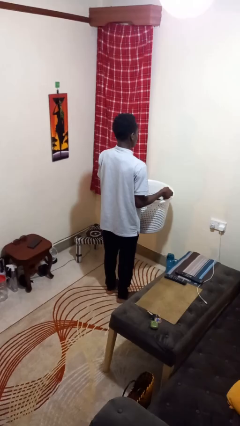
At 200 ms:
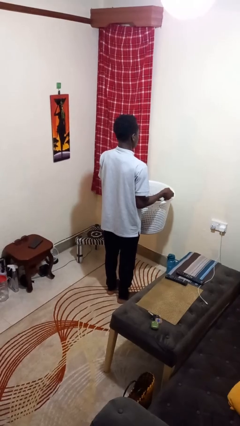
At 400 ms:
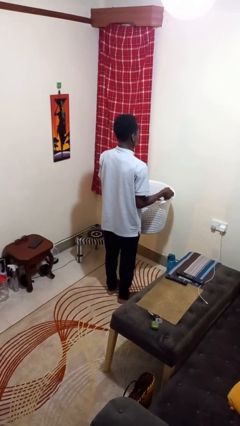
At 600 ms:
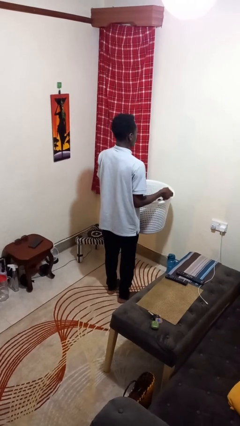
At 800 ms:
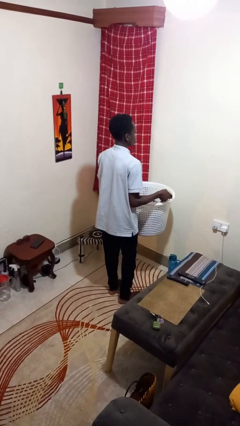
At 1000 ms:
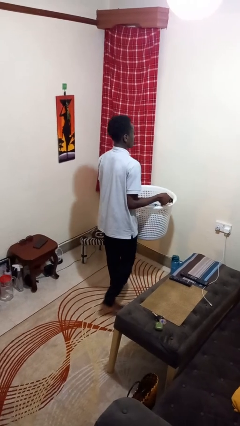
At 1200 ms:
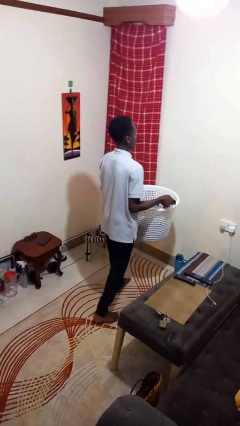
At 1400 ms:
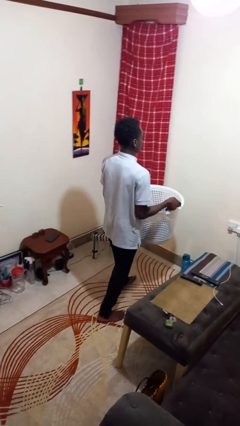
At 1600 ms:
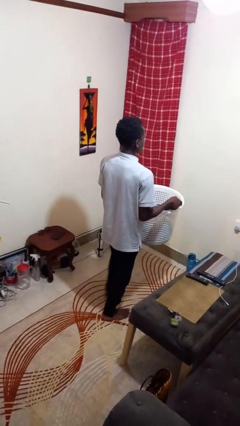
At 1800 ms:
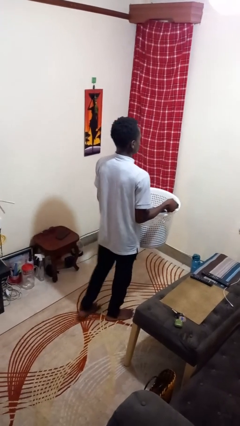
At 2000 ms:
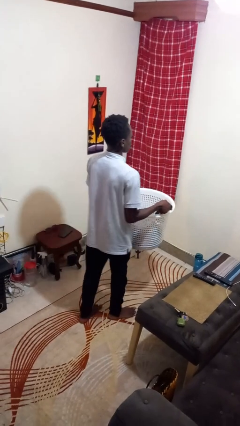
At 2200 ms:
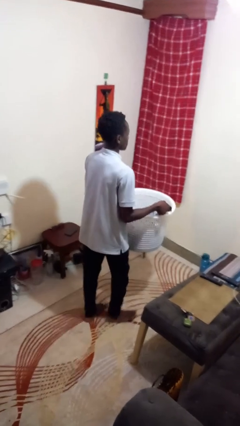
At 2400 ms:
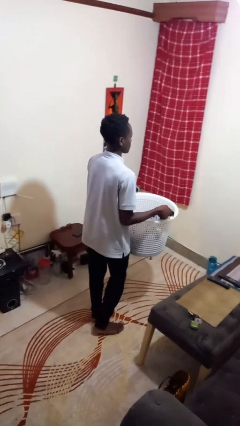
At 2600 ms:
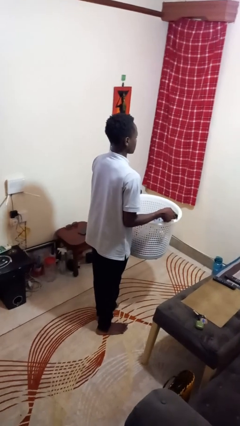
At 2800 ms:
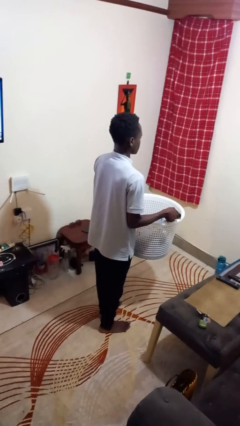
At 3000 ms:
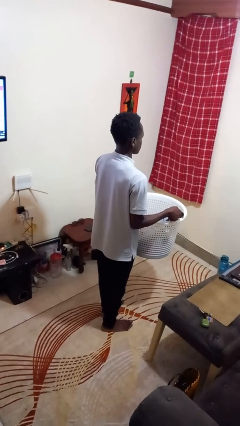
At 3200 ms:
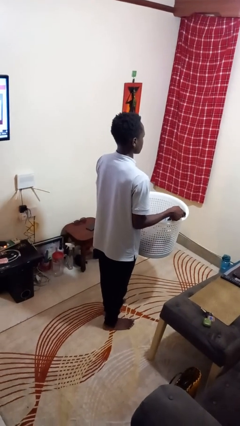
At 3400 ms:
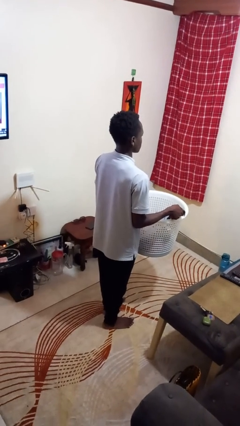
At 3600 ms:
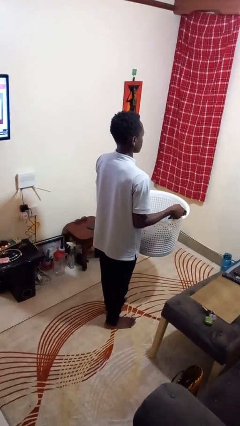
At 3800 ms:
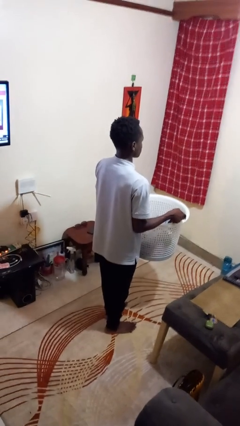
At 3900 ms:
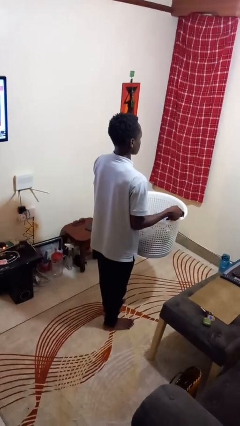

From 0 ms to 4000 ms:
person carries laundry basket

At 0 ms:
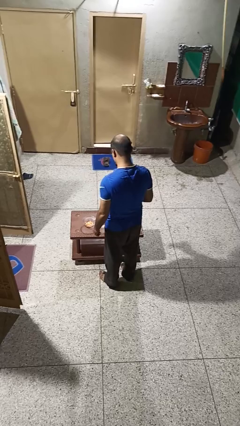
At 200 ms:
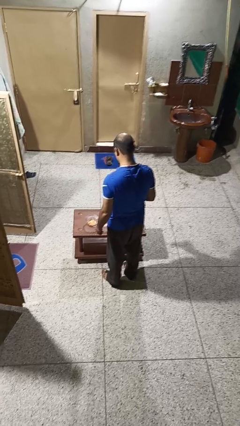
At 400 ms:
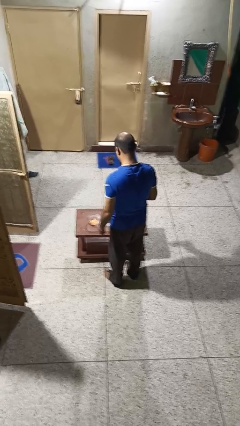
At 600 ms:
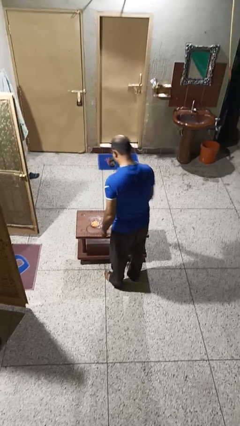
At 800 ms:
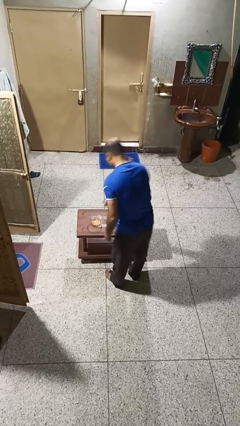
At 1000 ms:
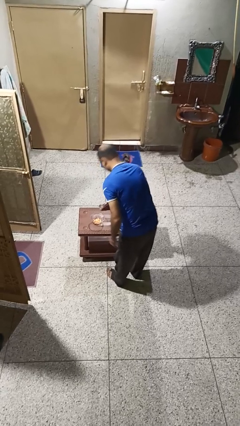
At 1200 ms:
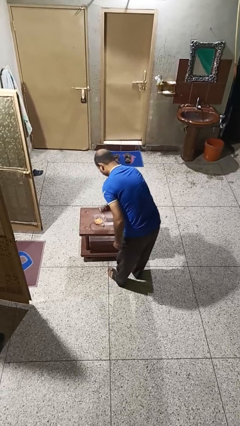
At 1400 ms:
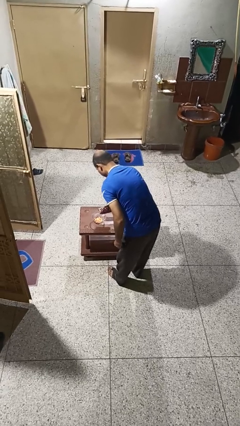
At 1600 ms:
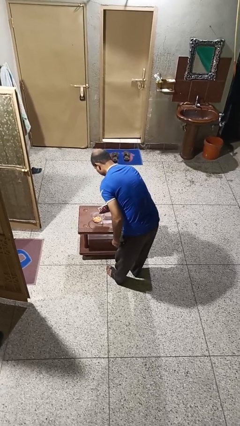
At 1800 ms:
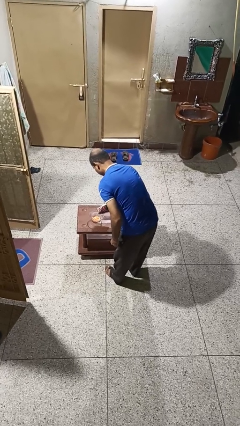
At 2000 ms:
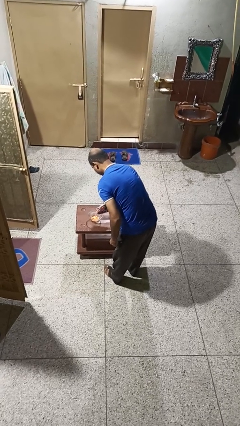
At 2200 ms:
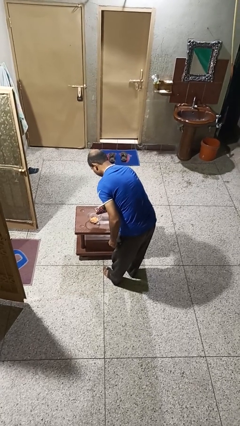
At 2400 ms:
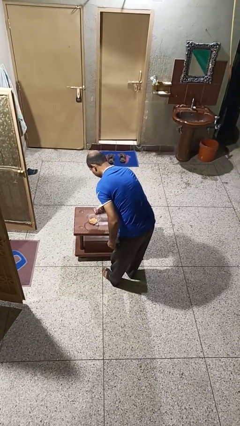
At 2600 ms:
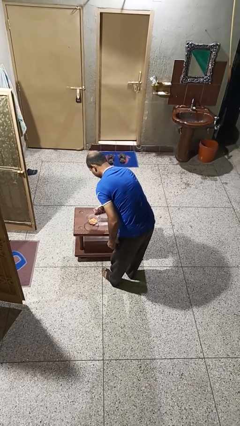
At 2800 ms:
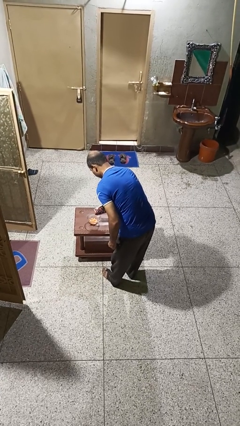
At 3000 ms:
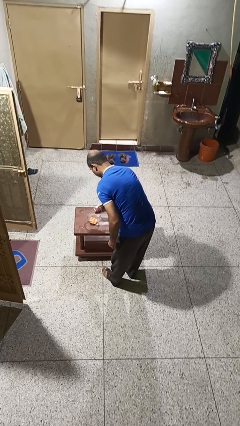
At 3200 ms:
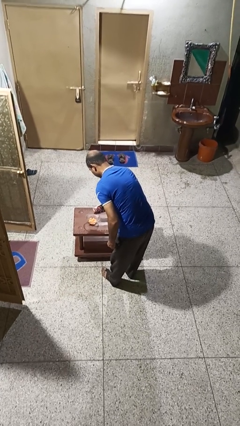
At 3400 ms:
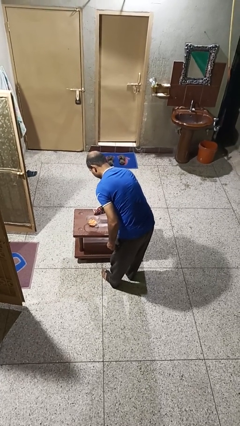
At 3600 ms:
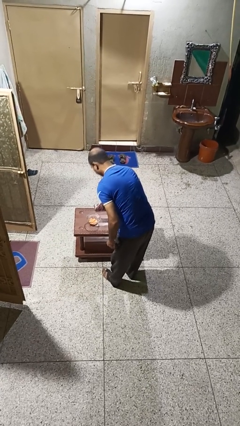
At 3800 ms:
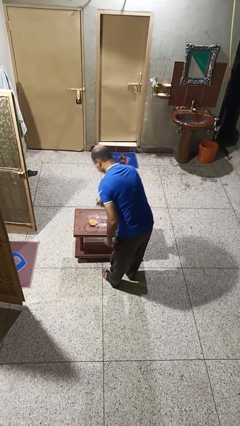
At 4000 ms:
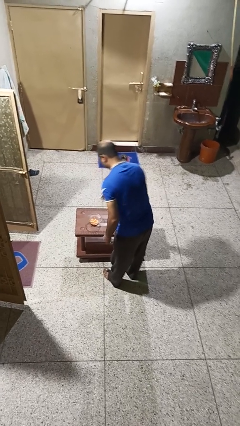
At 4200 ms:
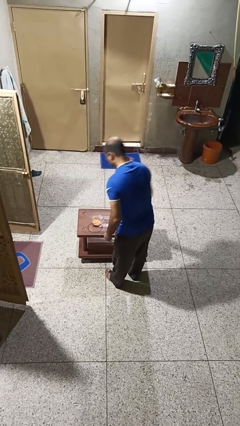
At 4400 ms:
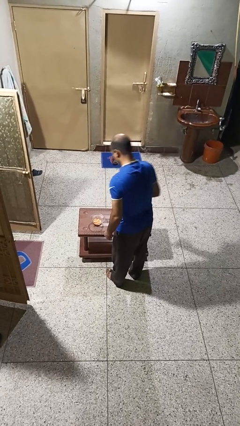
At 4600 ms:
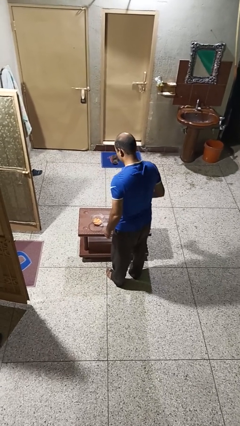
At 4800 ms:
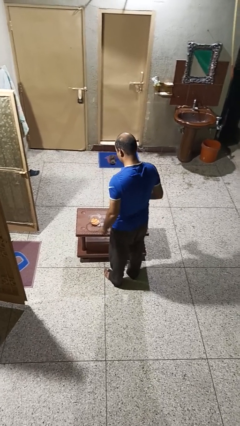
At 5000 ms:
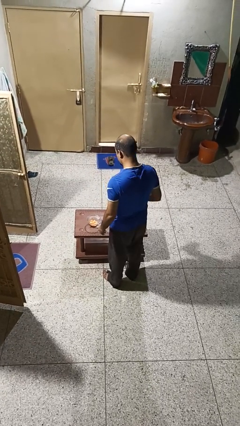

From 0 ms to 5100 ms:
person pours into bowl

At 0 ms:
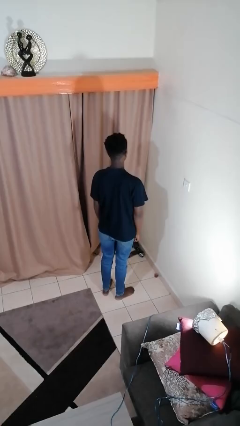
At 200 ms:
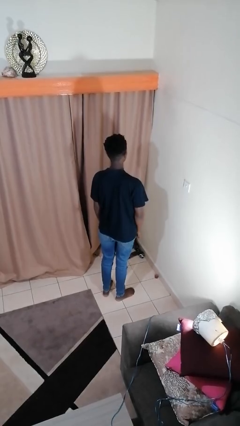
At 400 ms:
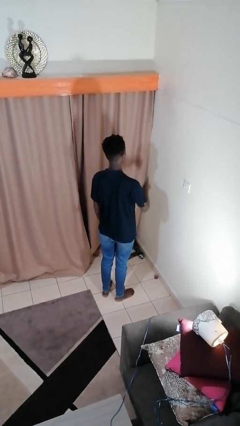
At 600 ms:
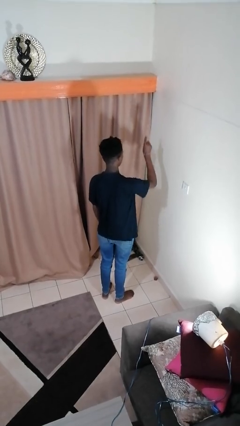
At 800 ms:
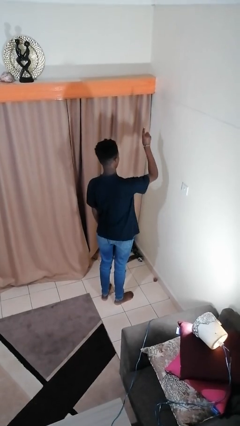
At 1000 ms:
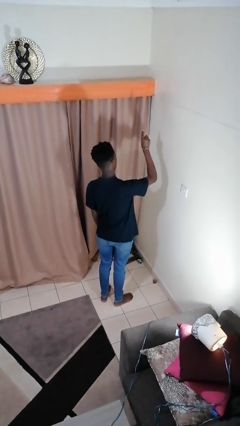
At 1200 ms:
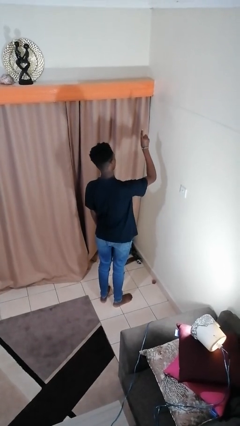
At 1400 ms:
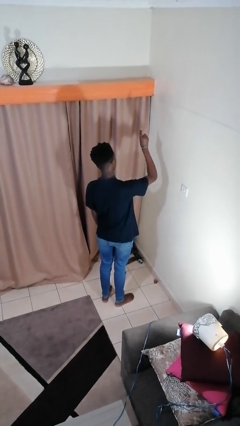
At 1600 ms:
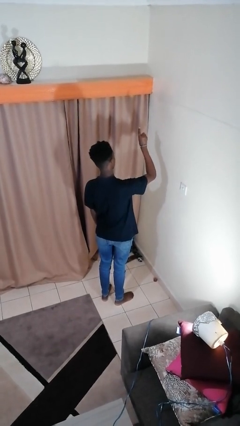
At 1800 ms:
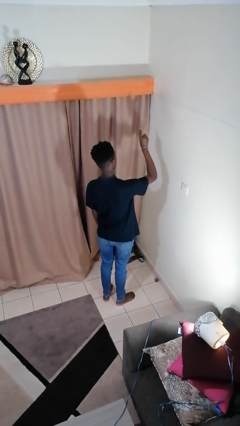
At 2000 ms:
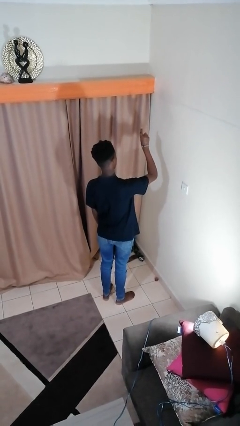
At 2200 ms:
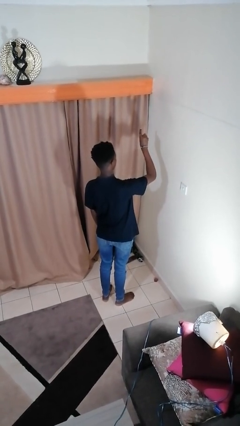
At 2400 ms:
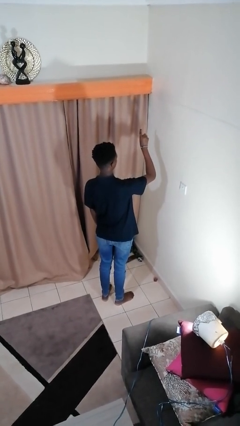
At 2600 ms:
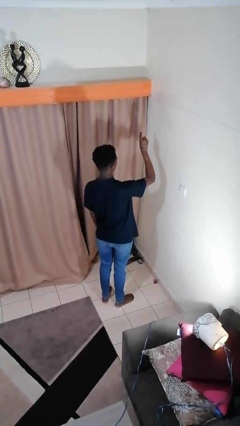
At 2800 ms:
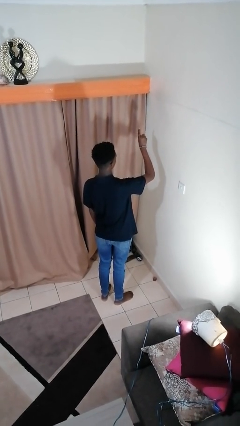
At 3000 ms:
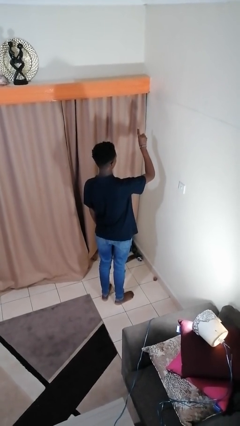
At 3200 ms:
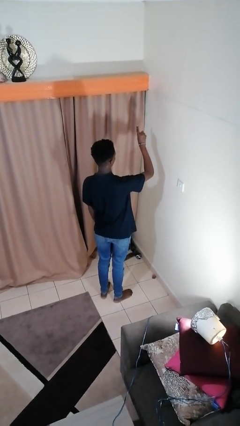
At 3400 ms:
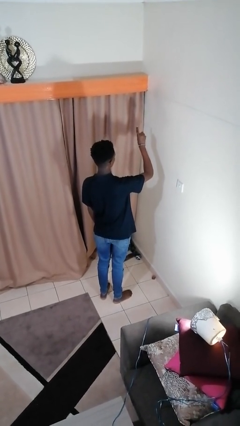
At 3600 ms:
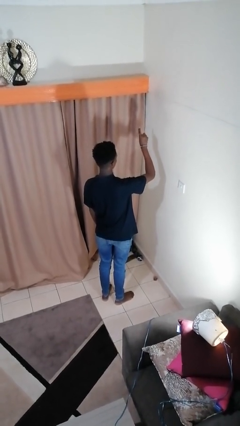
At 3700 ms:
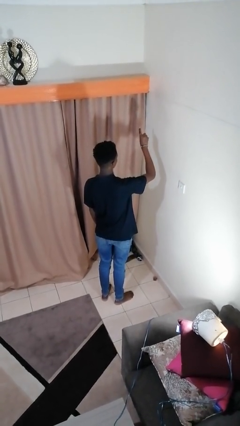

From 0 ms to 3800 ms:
person gestures number one

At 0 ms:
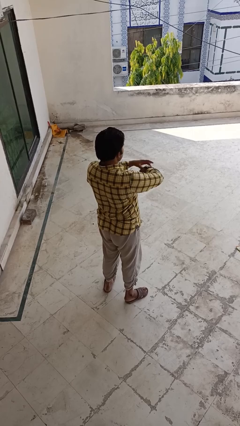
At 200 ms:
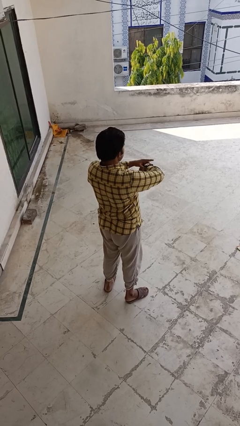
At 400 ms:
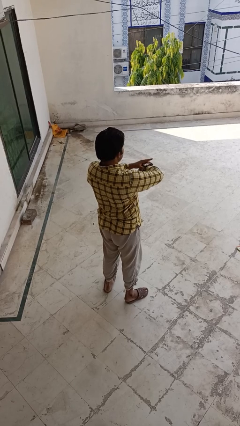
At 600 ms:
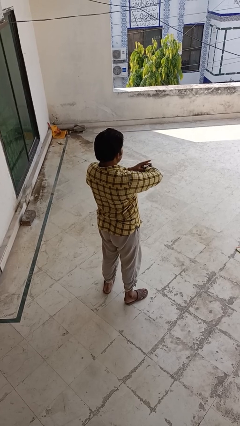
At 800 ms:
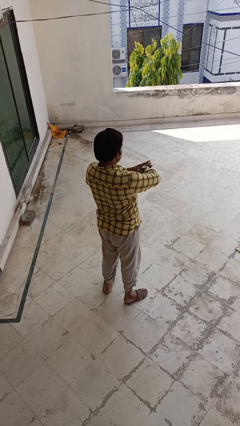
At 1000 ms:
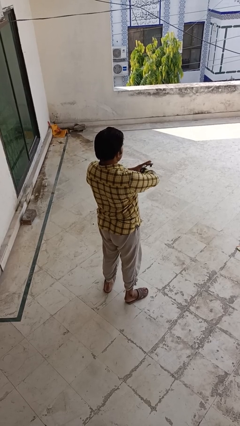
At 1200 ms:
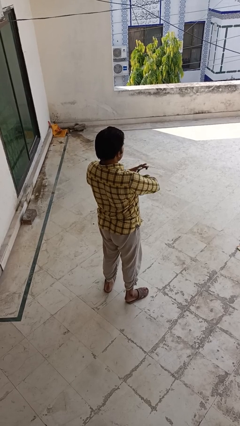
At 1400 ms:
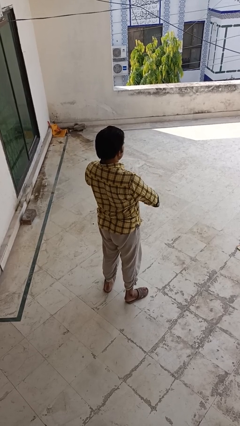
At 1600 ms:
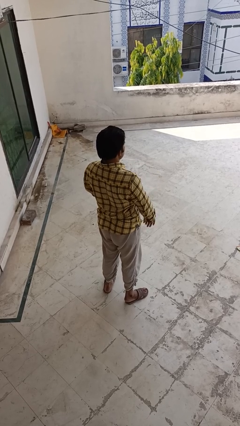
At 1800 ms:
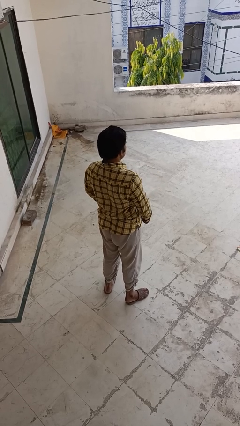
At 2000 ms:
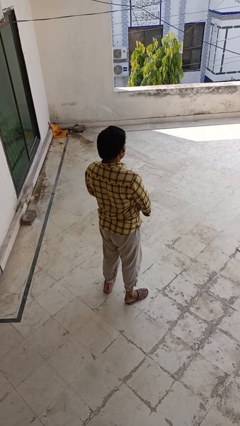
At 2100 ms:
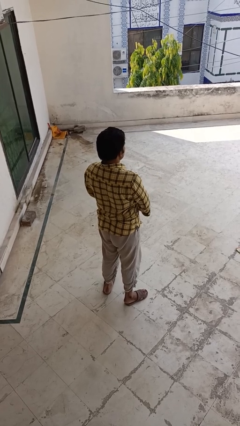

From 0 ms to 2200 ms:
person takes off wristwatch

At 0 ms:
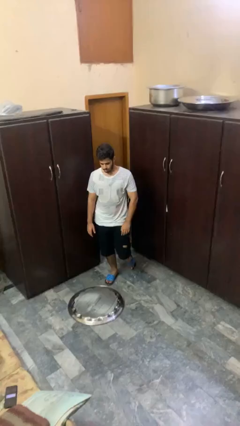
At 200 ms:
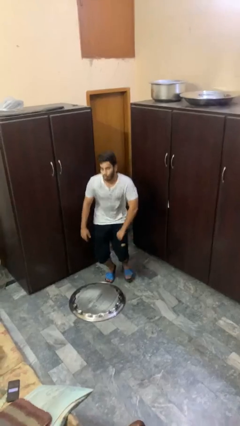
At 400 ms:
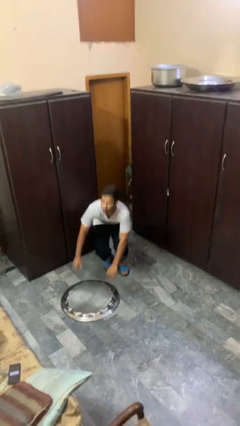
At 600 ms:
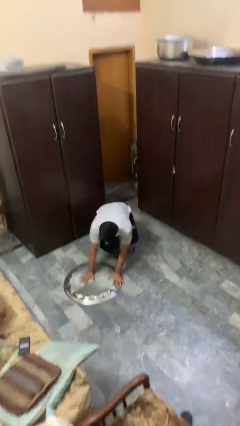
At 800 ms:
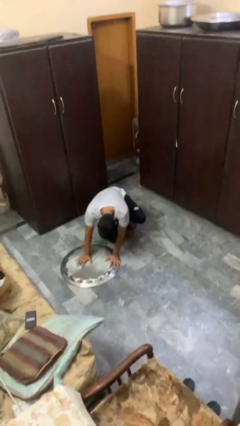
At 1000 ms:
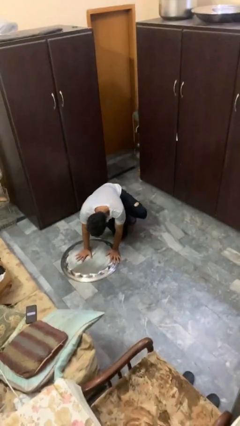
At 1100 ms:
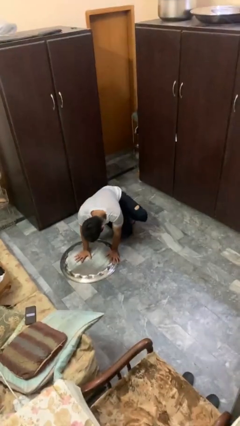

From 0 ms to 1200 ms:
person trips on object on floor
